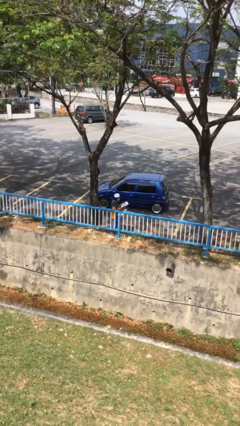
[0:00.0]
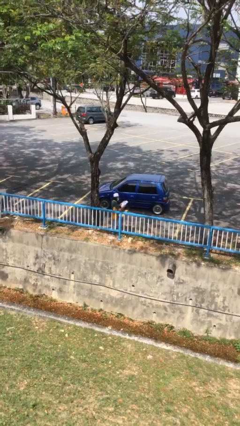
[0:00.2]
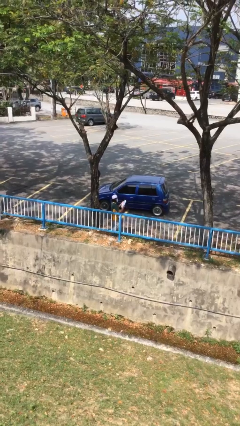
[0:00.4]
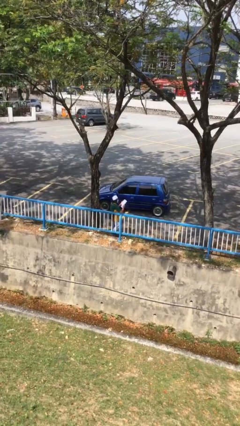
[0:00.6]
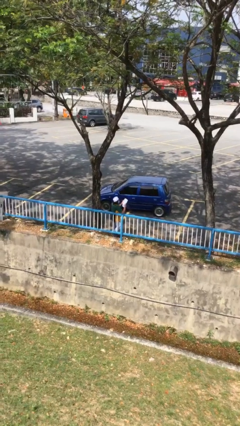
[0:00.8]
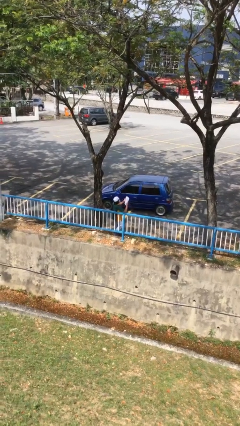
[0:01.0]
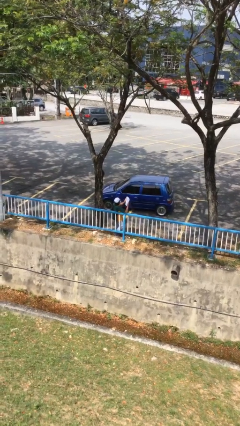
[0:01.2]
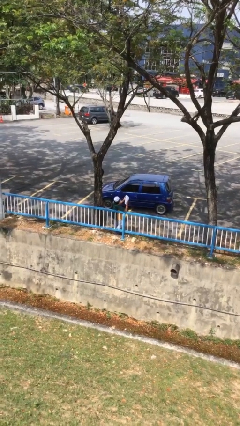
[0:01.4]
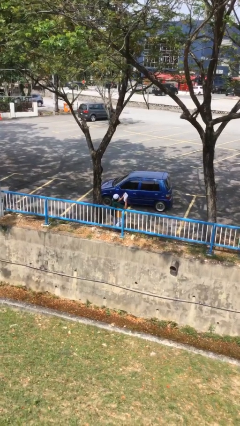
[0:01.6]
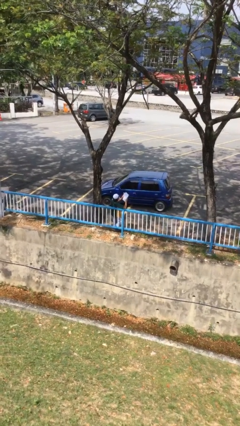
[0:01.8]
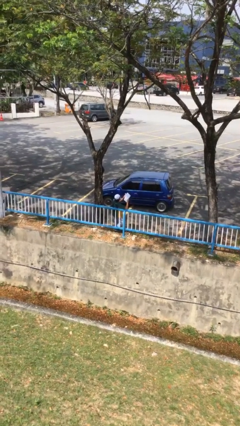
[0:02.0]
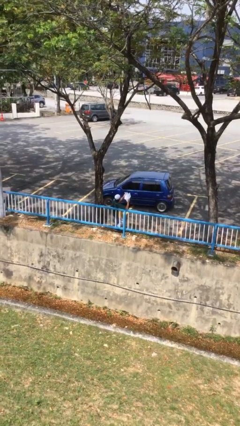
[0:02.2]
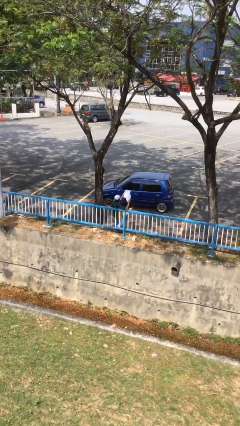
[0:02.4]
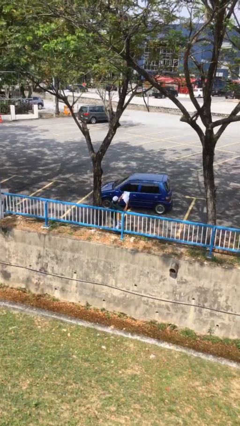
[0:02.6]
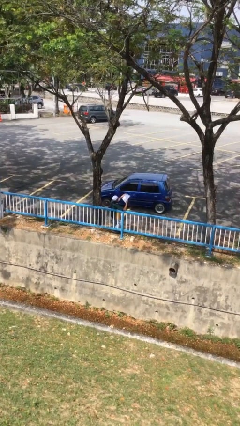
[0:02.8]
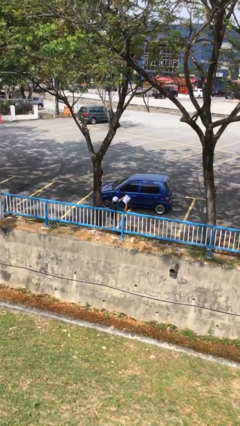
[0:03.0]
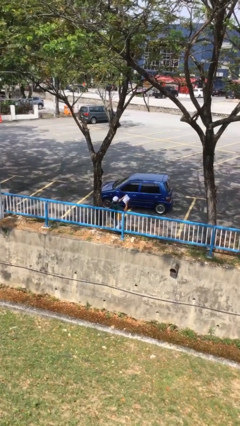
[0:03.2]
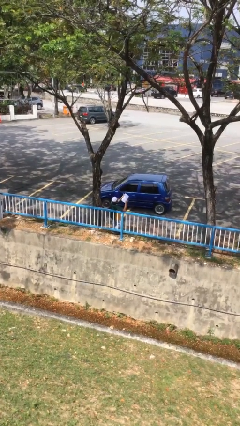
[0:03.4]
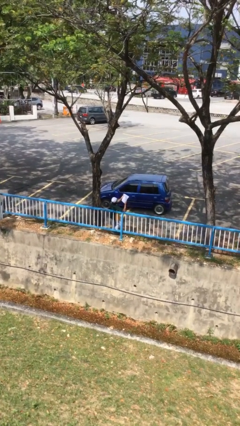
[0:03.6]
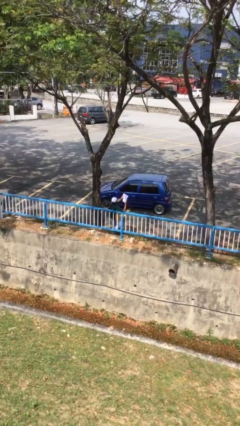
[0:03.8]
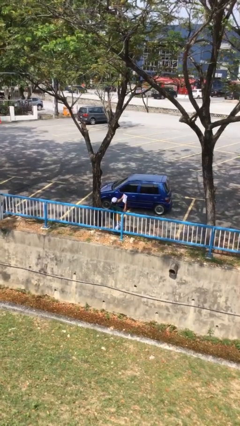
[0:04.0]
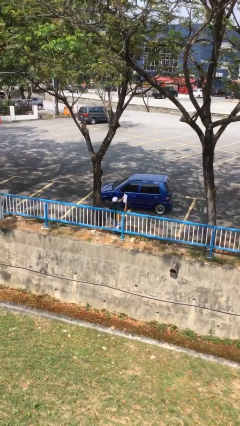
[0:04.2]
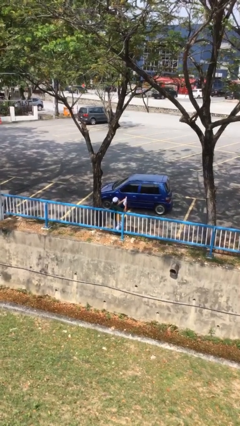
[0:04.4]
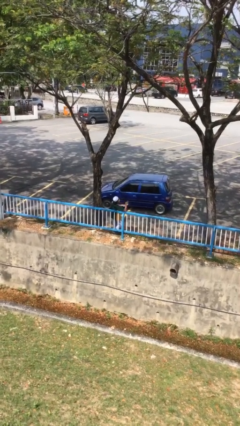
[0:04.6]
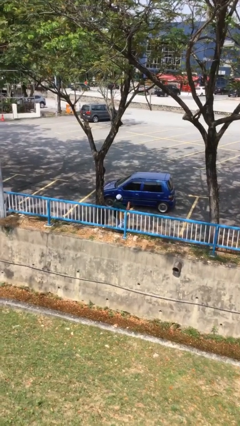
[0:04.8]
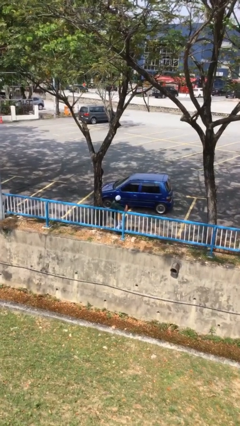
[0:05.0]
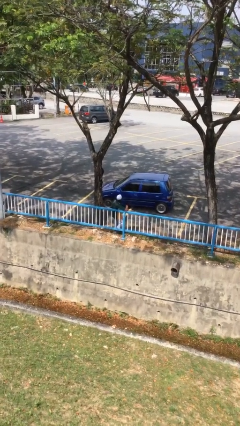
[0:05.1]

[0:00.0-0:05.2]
person reads document

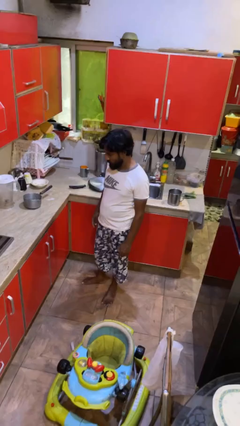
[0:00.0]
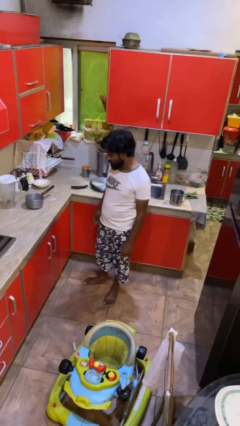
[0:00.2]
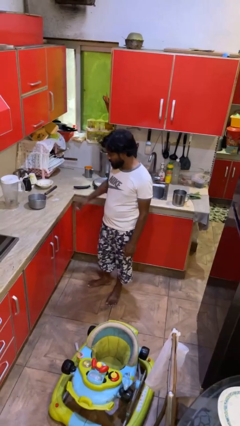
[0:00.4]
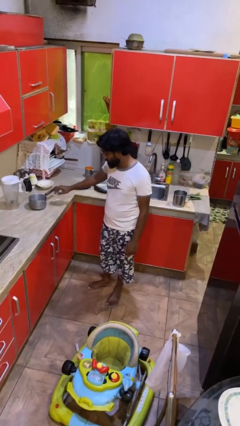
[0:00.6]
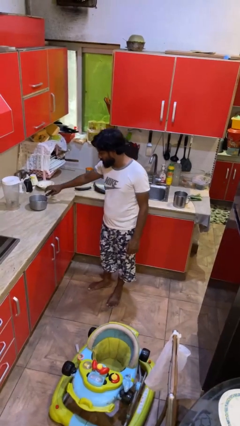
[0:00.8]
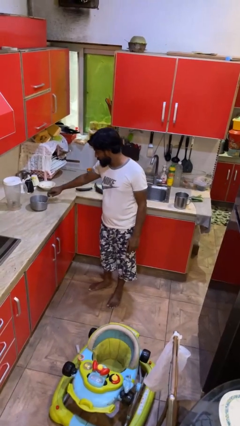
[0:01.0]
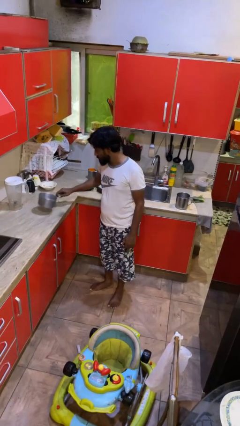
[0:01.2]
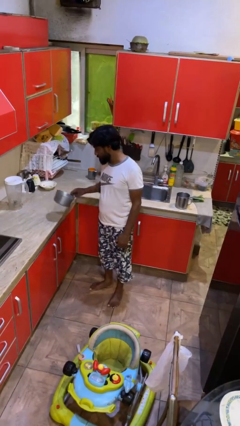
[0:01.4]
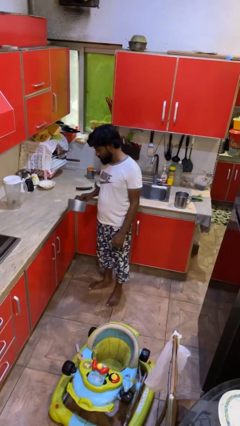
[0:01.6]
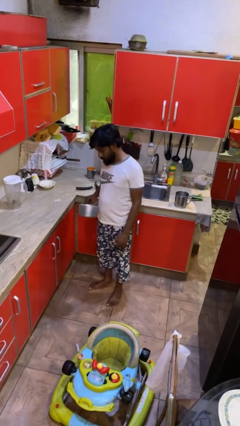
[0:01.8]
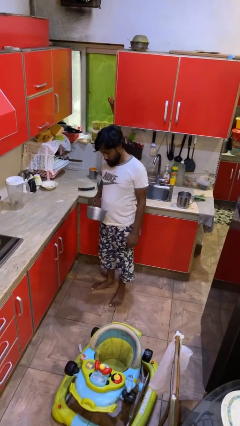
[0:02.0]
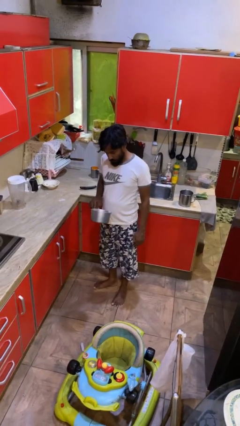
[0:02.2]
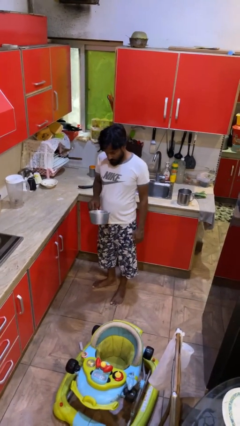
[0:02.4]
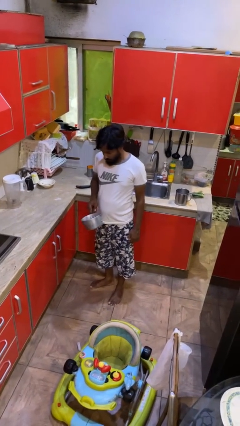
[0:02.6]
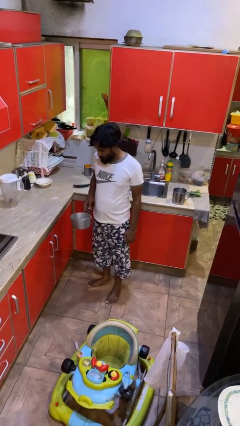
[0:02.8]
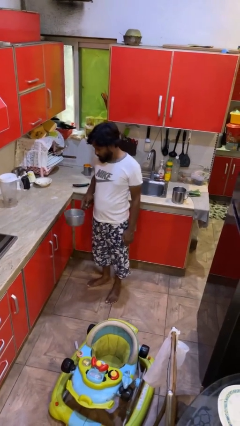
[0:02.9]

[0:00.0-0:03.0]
person picks up object from countertop

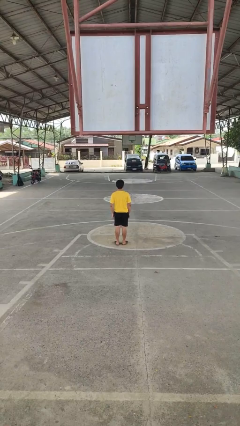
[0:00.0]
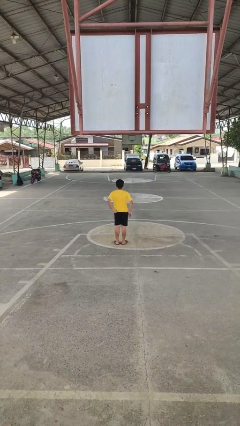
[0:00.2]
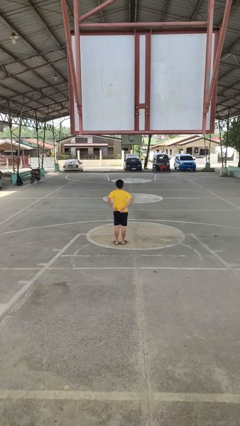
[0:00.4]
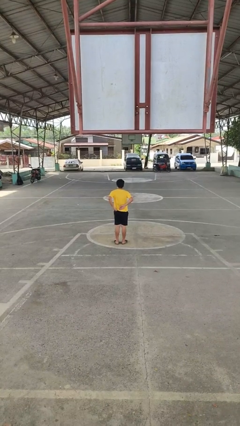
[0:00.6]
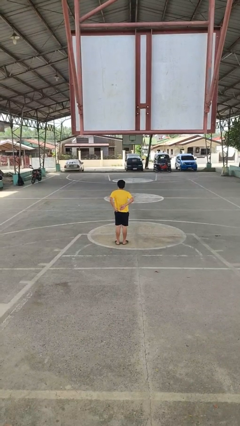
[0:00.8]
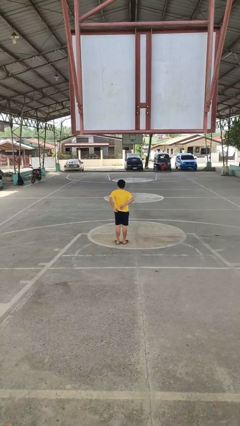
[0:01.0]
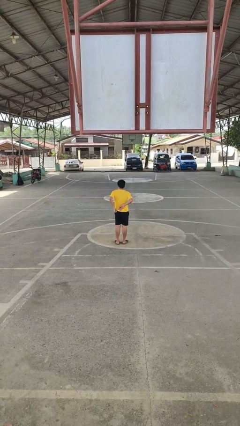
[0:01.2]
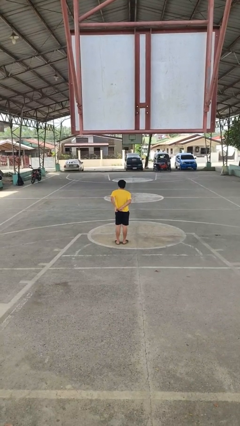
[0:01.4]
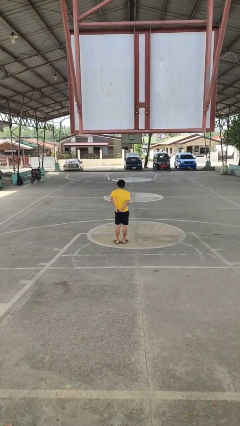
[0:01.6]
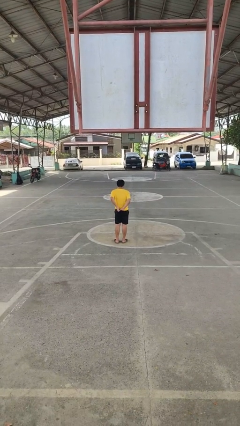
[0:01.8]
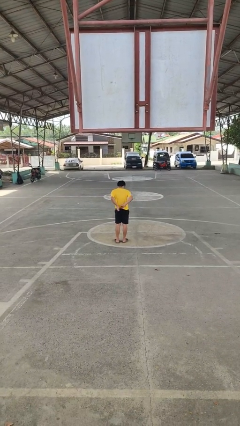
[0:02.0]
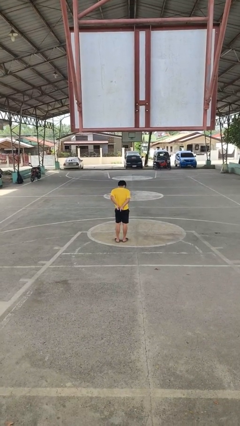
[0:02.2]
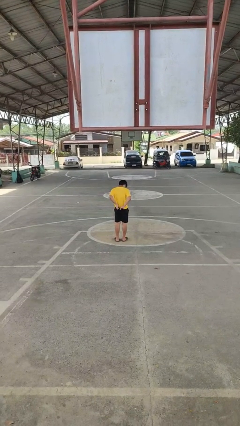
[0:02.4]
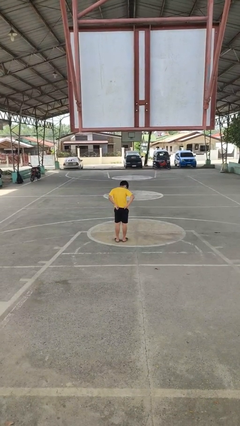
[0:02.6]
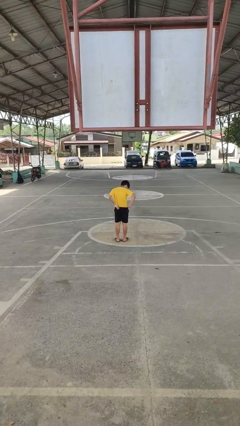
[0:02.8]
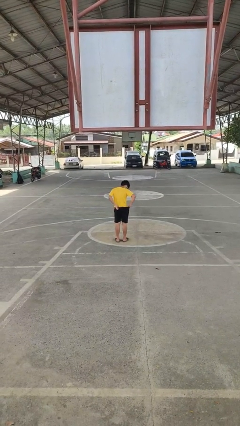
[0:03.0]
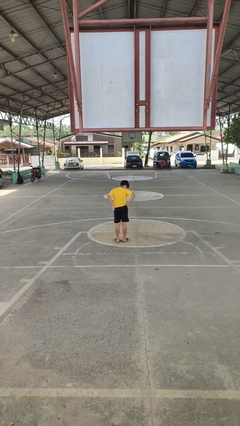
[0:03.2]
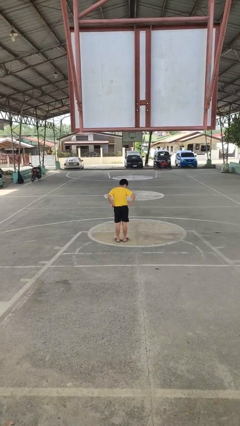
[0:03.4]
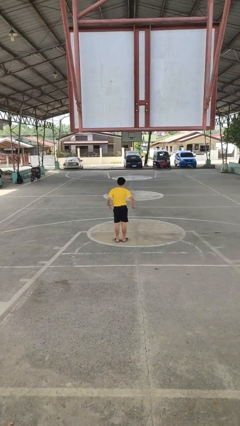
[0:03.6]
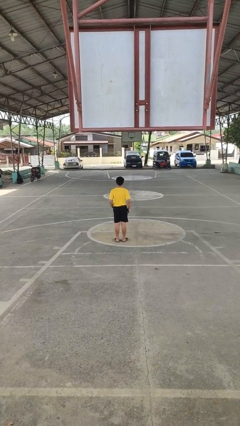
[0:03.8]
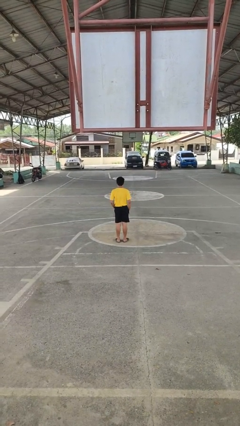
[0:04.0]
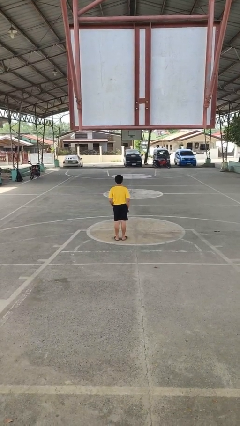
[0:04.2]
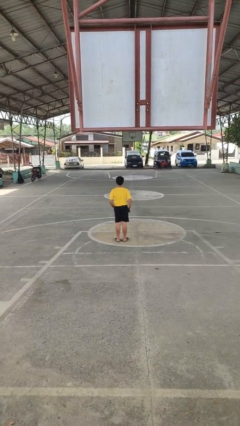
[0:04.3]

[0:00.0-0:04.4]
person tucks in shirt

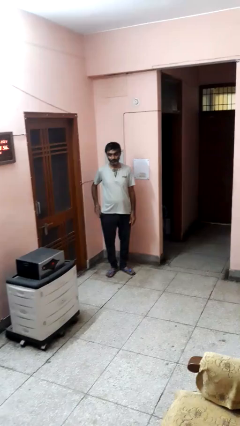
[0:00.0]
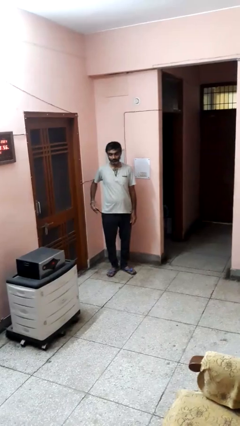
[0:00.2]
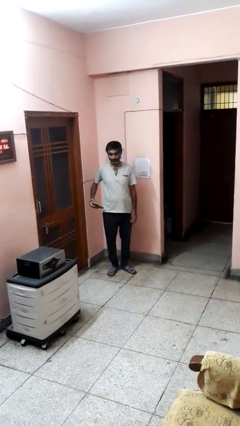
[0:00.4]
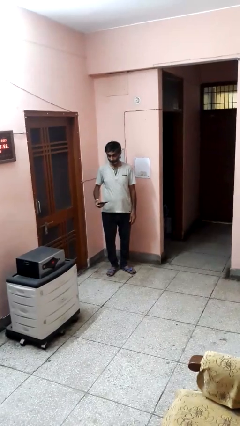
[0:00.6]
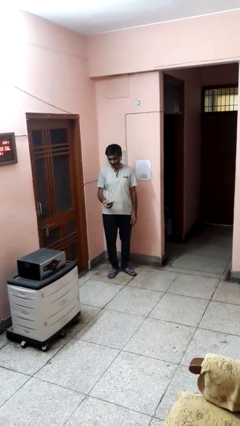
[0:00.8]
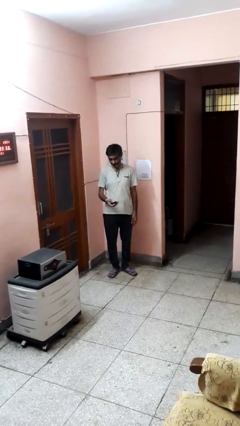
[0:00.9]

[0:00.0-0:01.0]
person takes phone from pocket

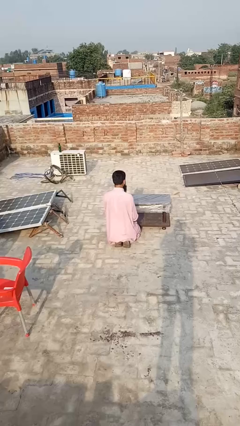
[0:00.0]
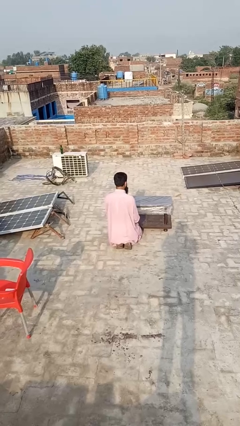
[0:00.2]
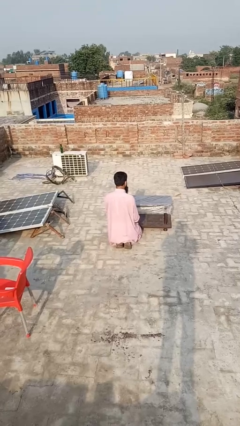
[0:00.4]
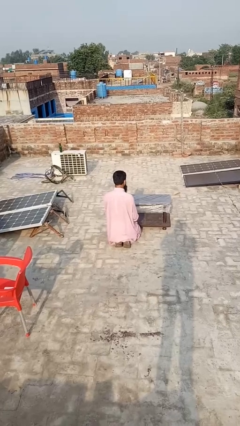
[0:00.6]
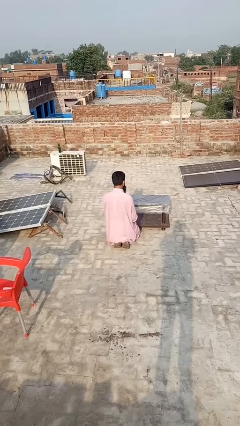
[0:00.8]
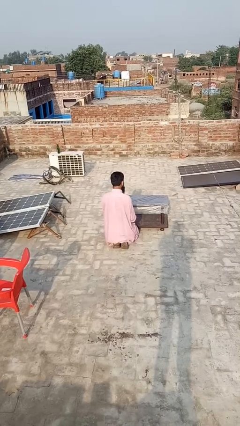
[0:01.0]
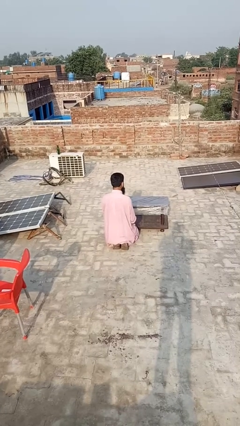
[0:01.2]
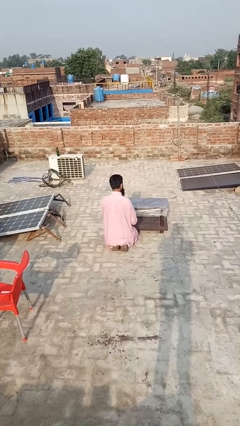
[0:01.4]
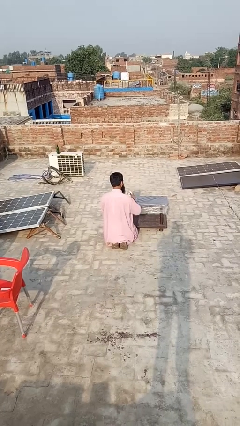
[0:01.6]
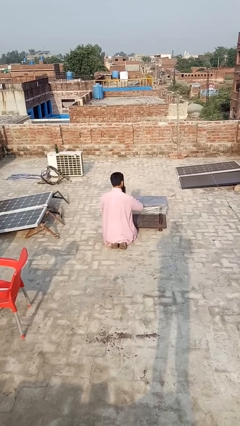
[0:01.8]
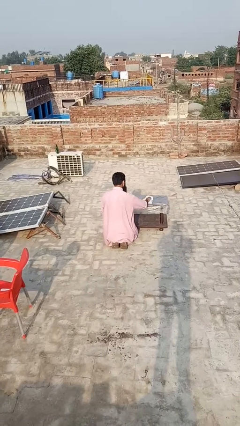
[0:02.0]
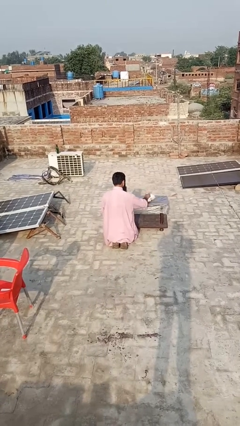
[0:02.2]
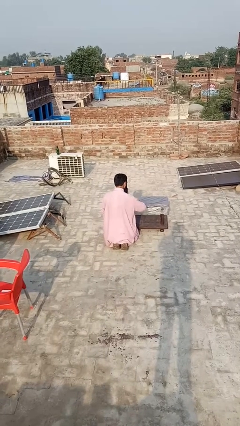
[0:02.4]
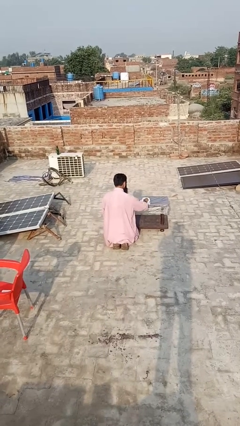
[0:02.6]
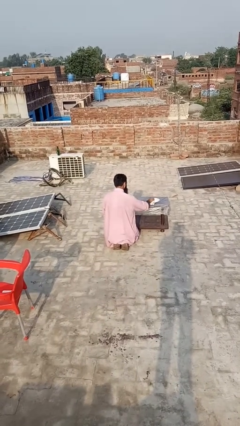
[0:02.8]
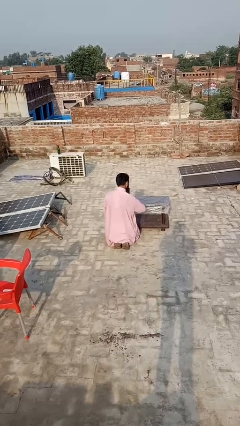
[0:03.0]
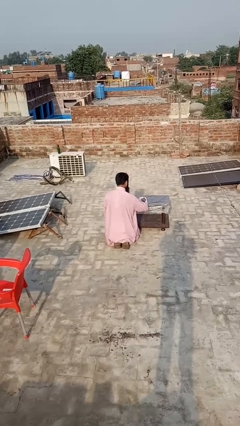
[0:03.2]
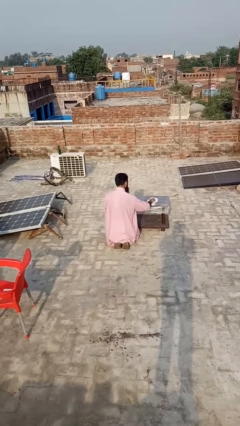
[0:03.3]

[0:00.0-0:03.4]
person cleans table with rag

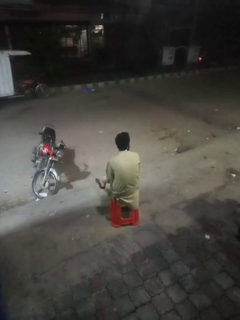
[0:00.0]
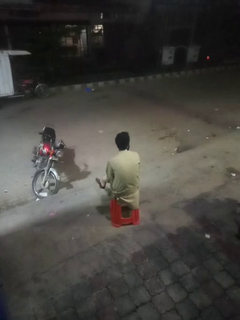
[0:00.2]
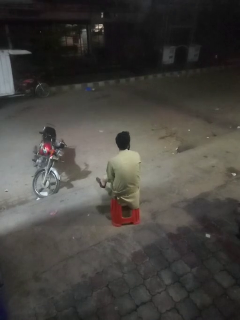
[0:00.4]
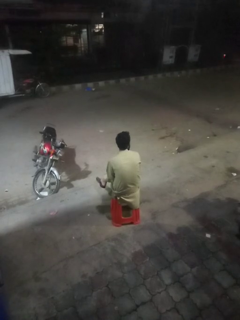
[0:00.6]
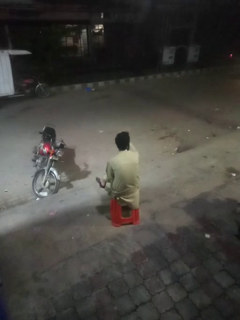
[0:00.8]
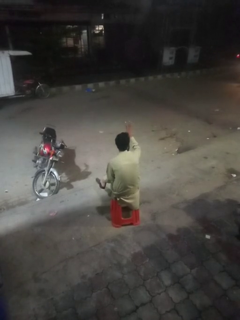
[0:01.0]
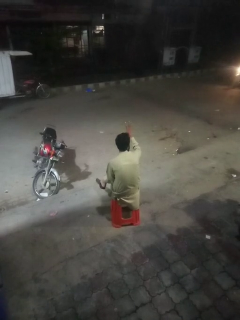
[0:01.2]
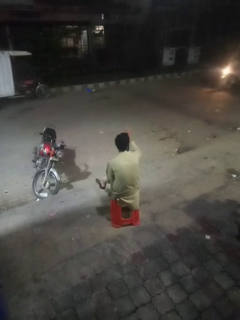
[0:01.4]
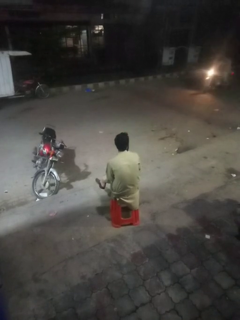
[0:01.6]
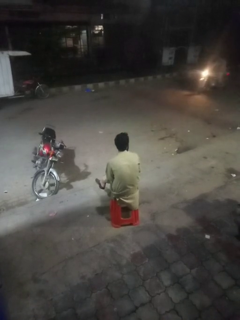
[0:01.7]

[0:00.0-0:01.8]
person gestures number four
